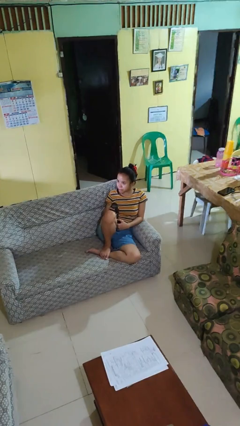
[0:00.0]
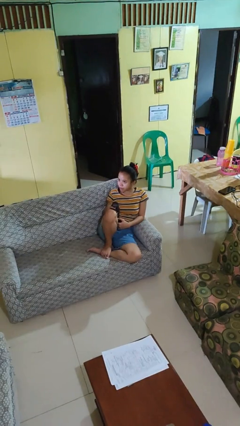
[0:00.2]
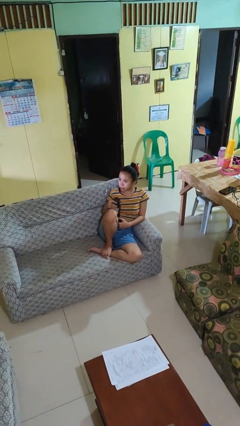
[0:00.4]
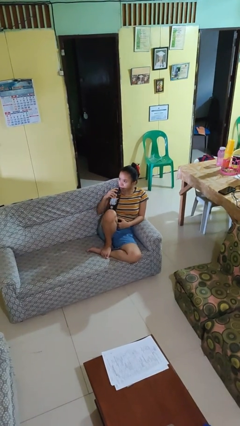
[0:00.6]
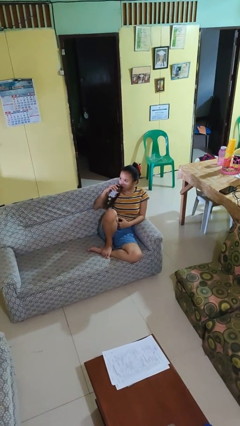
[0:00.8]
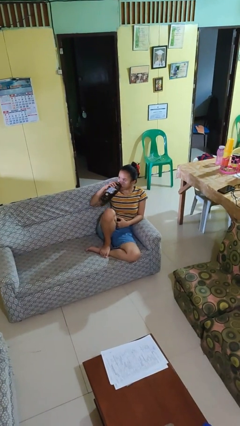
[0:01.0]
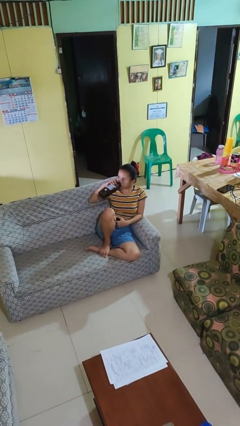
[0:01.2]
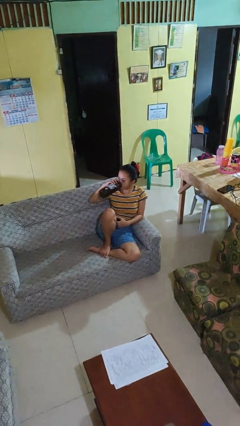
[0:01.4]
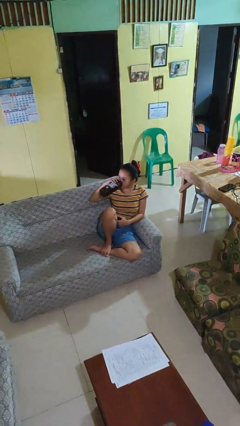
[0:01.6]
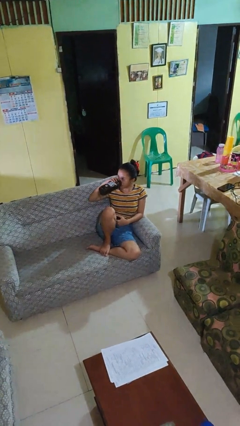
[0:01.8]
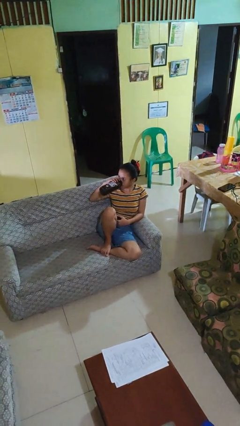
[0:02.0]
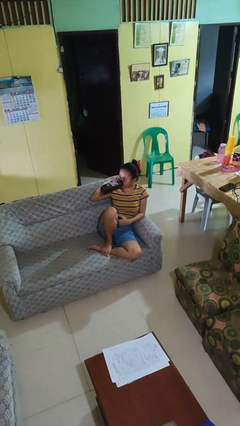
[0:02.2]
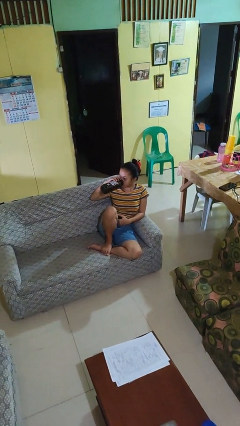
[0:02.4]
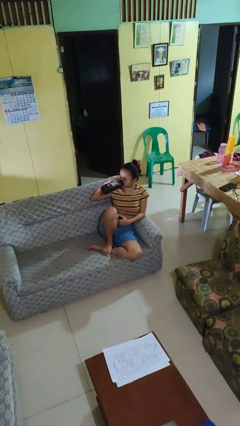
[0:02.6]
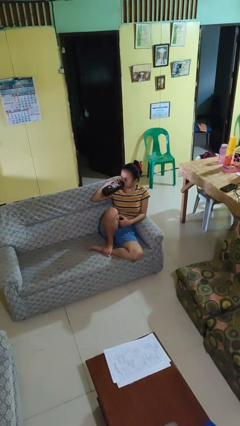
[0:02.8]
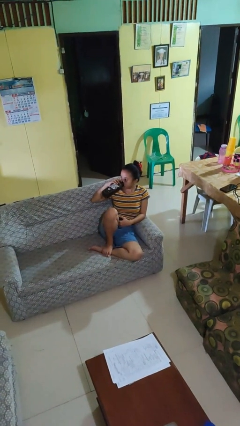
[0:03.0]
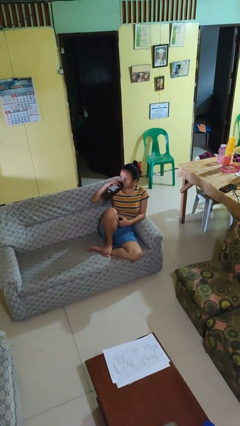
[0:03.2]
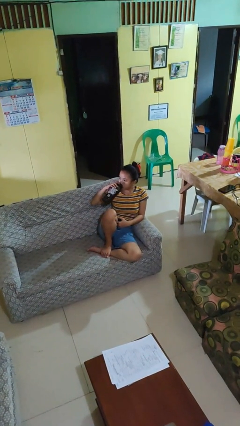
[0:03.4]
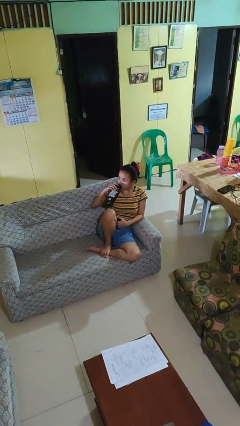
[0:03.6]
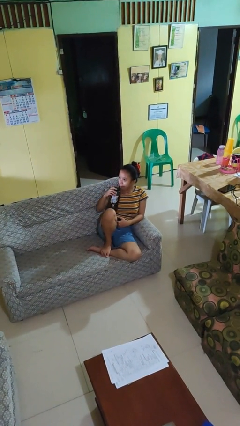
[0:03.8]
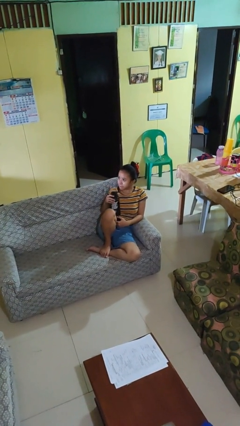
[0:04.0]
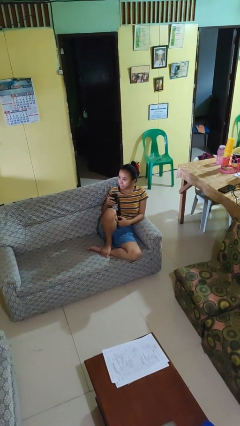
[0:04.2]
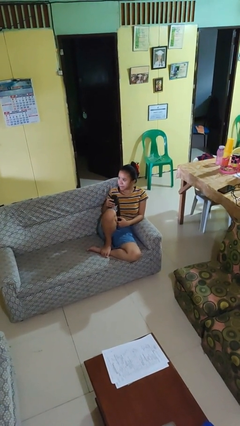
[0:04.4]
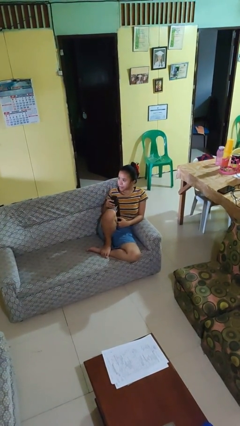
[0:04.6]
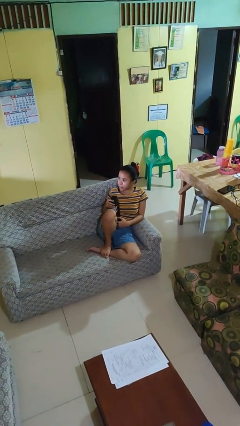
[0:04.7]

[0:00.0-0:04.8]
person drinks from bottle

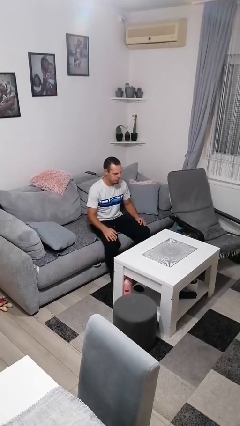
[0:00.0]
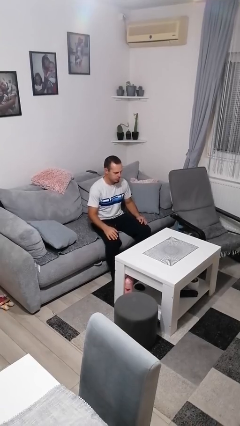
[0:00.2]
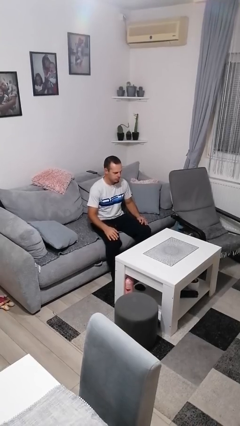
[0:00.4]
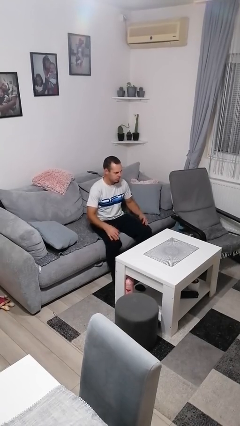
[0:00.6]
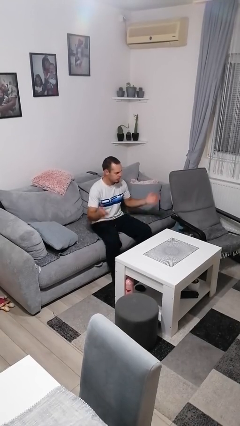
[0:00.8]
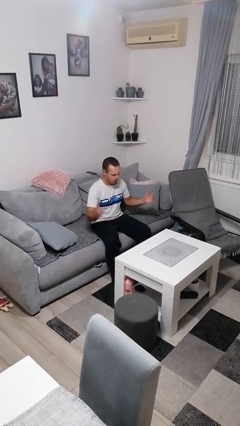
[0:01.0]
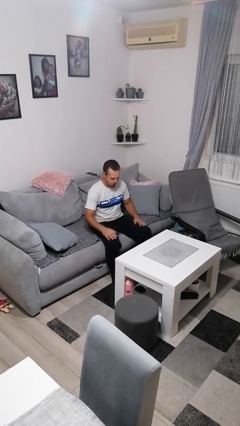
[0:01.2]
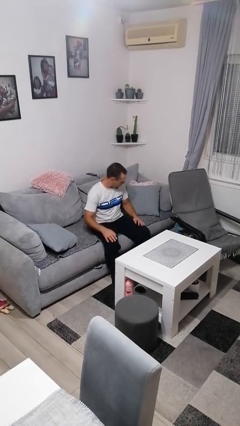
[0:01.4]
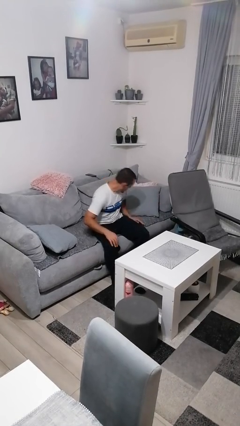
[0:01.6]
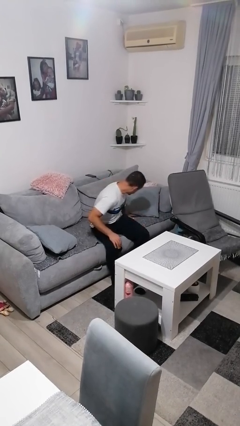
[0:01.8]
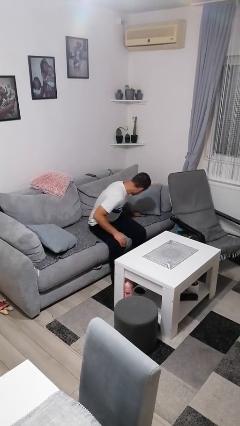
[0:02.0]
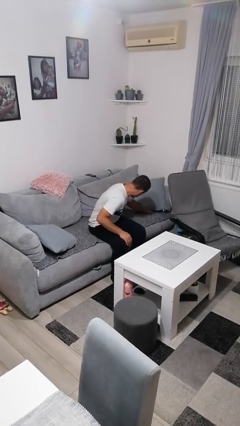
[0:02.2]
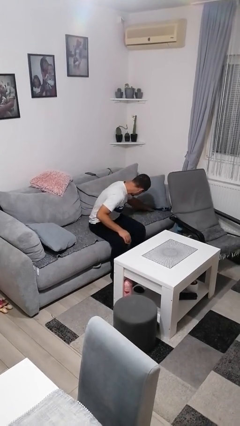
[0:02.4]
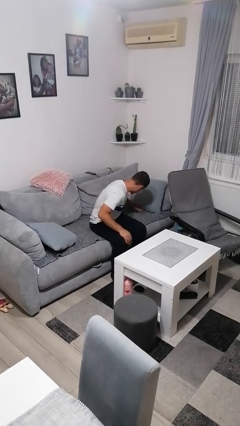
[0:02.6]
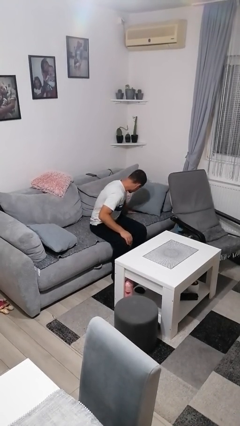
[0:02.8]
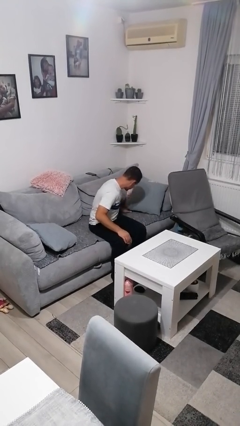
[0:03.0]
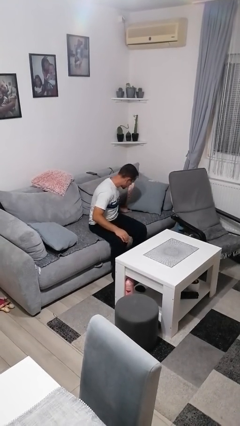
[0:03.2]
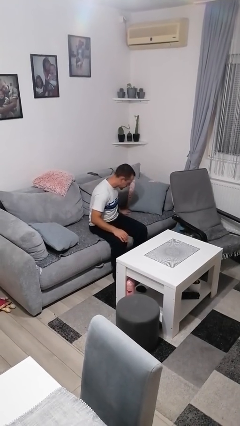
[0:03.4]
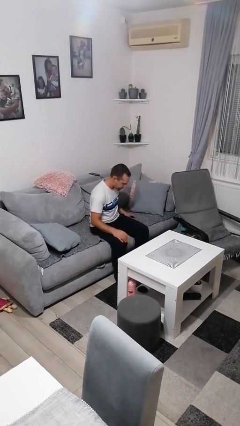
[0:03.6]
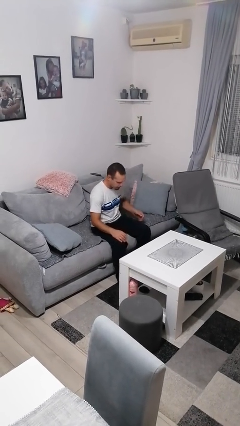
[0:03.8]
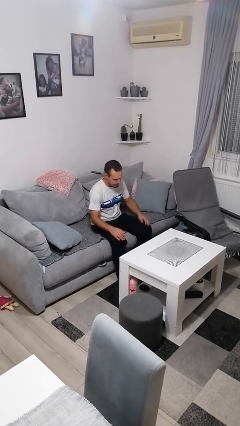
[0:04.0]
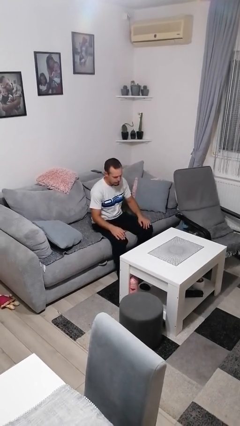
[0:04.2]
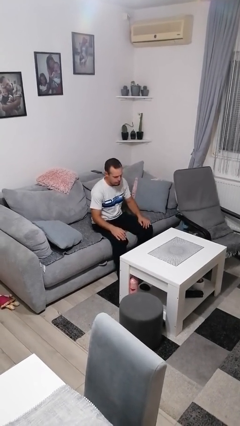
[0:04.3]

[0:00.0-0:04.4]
person searches in couch

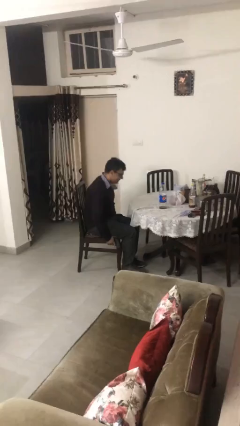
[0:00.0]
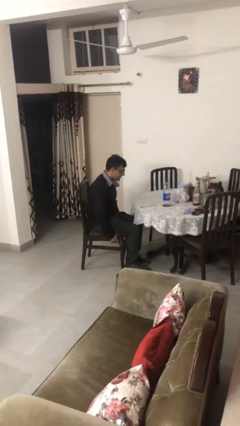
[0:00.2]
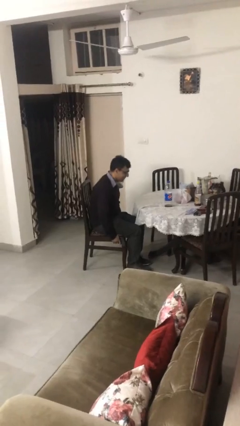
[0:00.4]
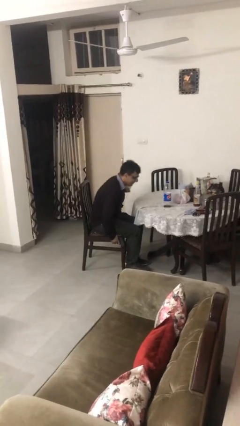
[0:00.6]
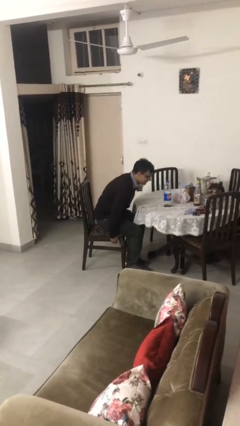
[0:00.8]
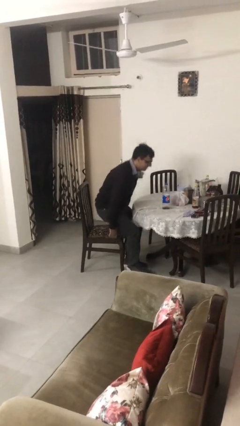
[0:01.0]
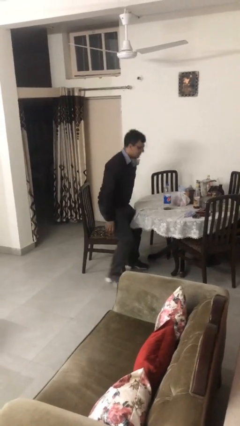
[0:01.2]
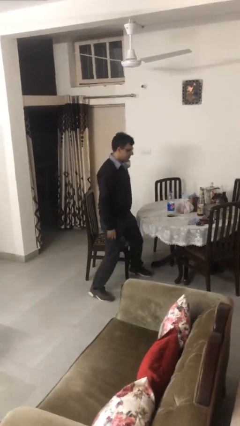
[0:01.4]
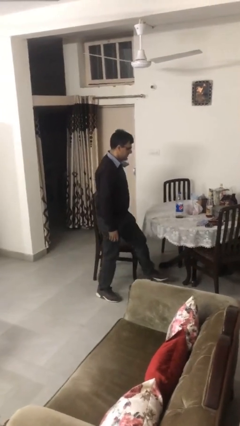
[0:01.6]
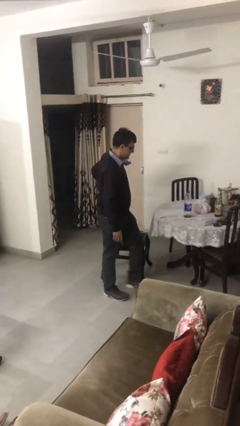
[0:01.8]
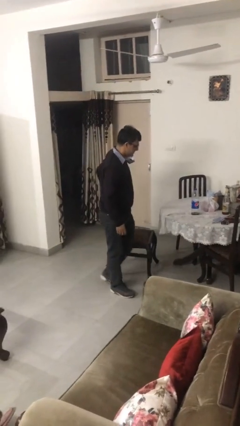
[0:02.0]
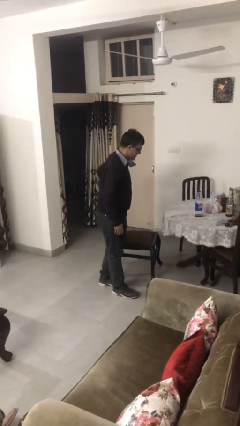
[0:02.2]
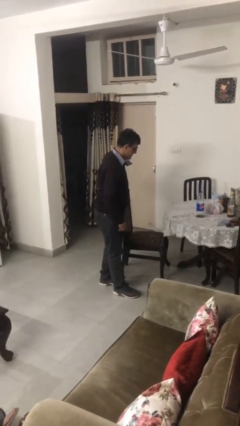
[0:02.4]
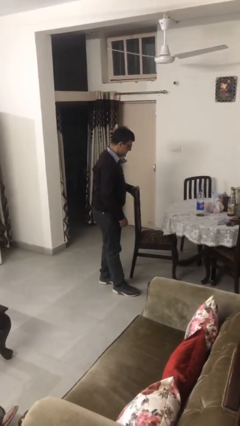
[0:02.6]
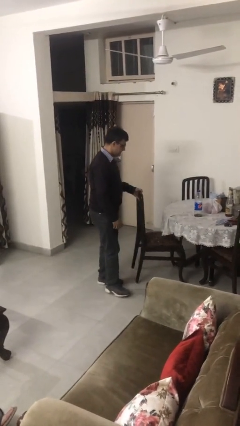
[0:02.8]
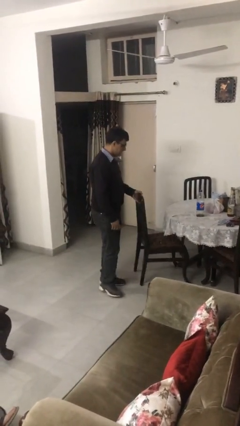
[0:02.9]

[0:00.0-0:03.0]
person stands up

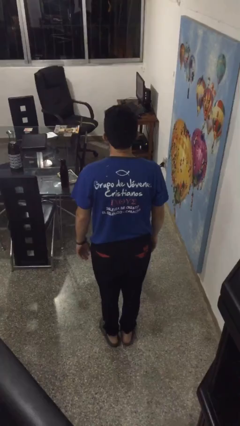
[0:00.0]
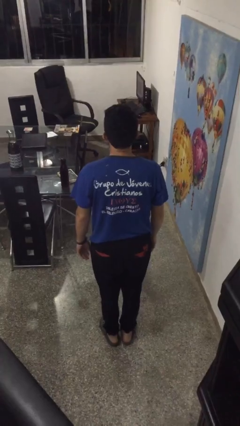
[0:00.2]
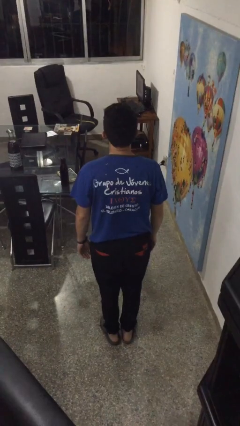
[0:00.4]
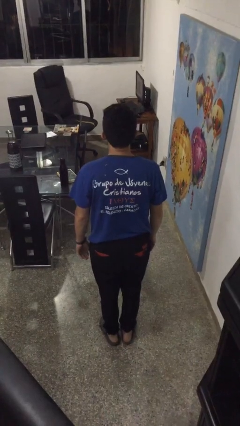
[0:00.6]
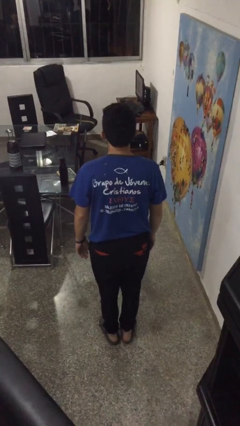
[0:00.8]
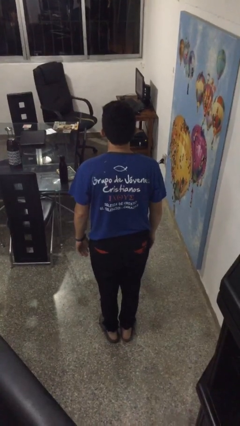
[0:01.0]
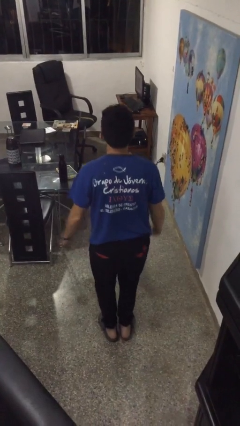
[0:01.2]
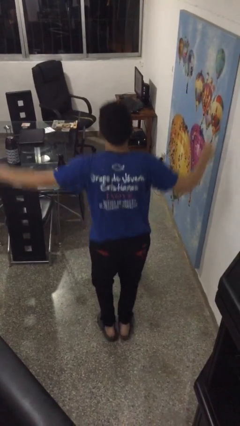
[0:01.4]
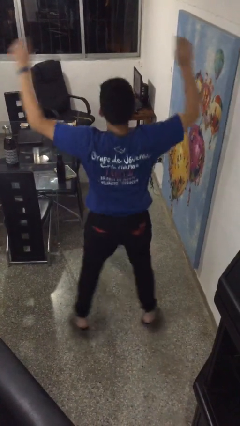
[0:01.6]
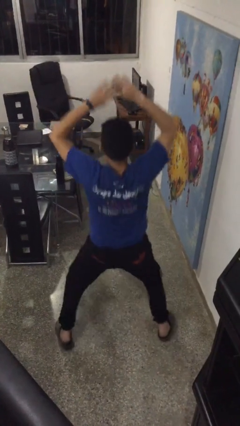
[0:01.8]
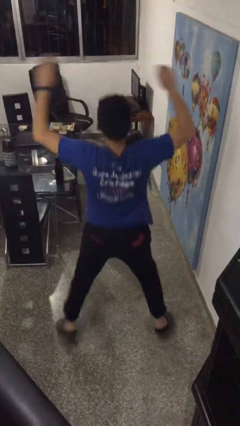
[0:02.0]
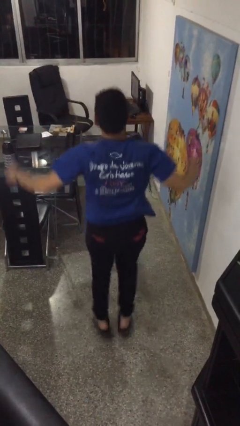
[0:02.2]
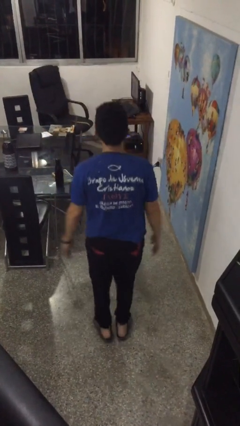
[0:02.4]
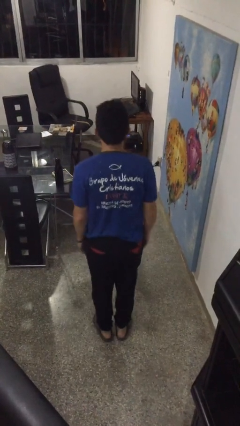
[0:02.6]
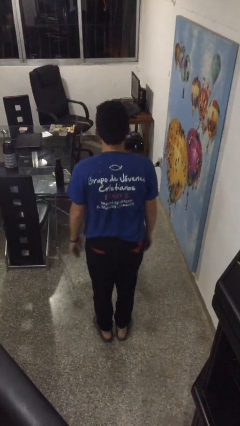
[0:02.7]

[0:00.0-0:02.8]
person exercises with jumping jacks

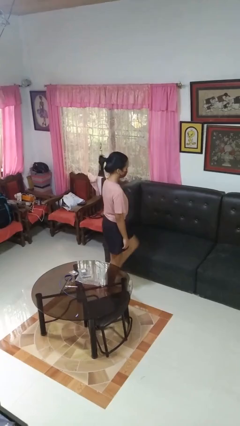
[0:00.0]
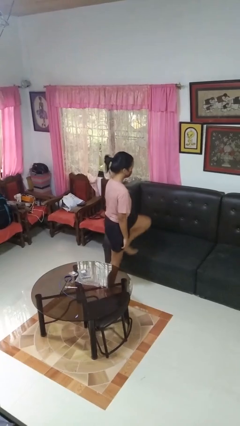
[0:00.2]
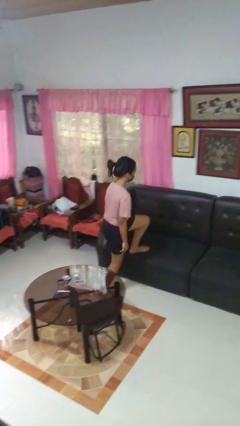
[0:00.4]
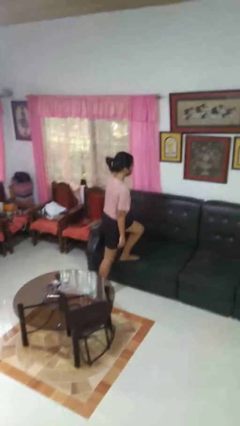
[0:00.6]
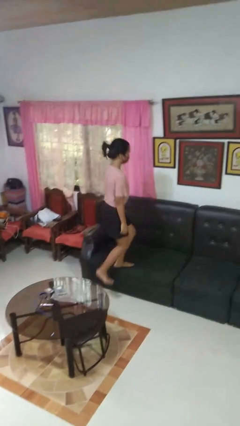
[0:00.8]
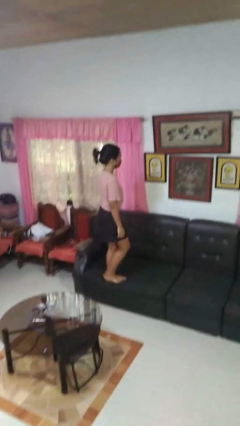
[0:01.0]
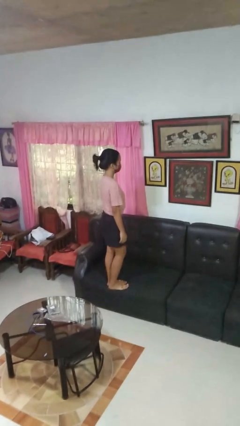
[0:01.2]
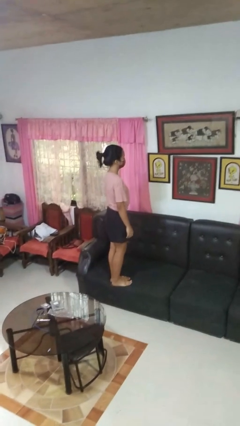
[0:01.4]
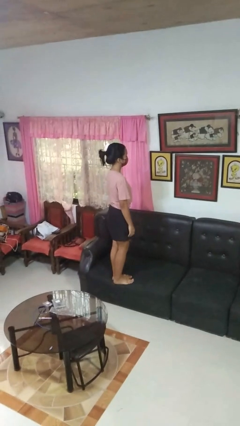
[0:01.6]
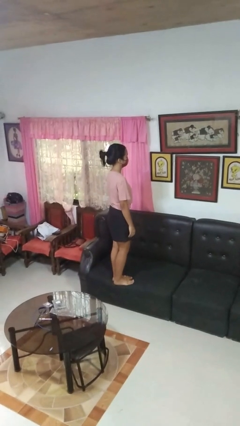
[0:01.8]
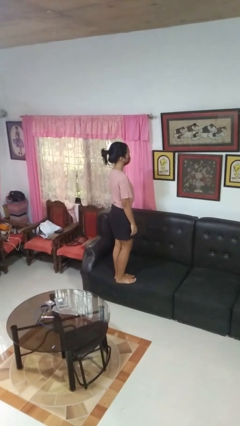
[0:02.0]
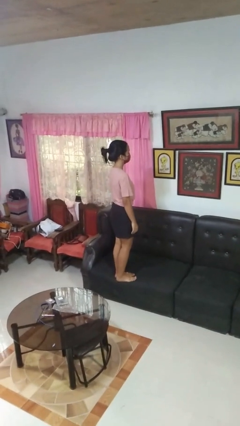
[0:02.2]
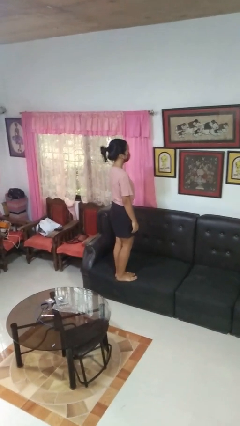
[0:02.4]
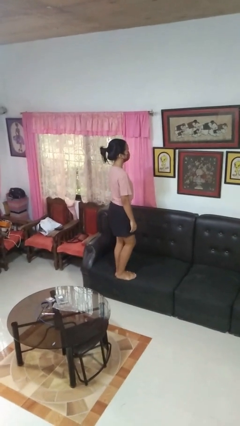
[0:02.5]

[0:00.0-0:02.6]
person climbs on couch
